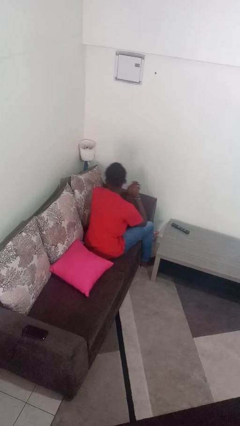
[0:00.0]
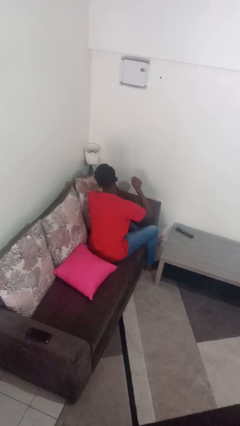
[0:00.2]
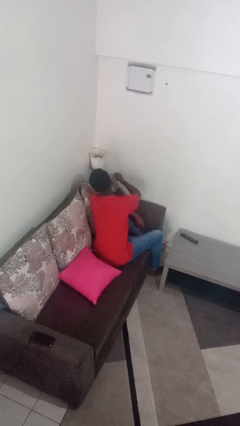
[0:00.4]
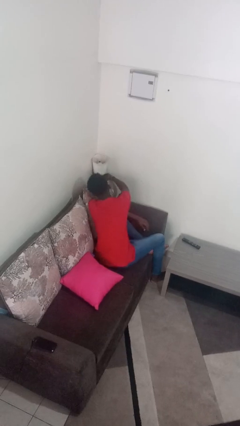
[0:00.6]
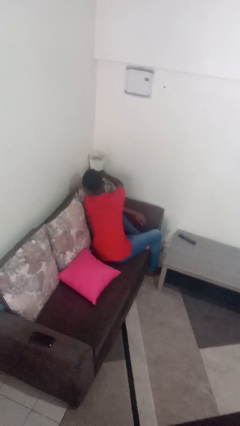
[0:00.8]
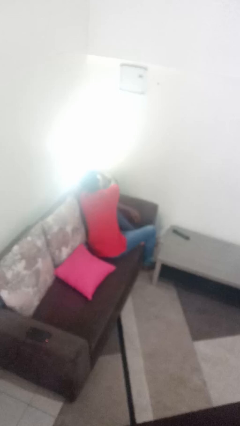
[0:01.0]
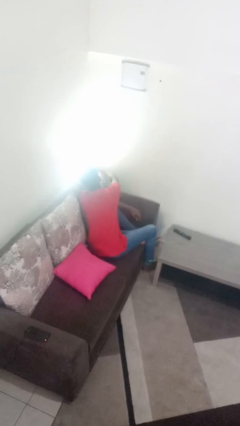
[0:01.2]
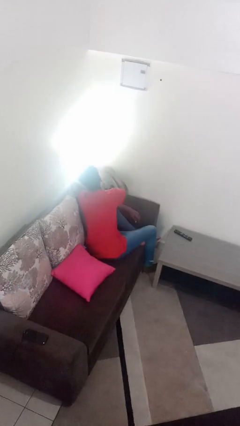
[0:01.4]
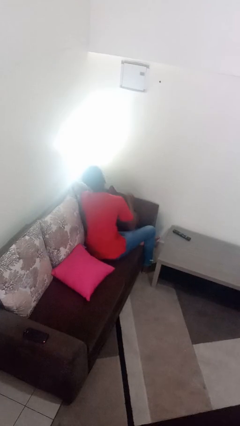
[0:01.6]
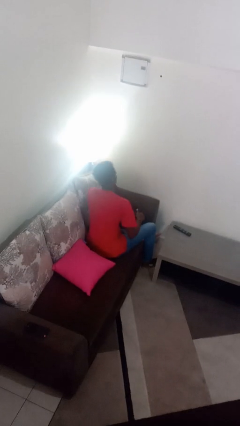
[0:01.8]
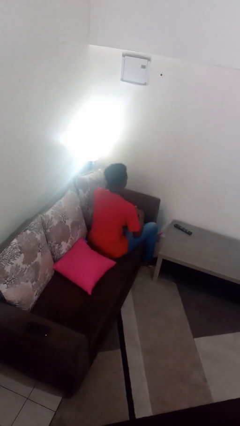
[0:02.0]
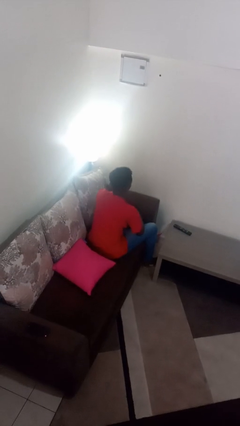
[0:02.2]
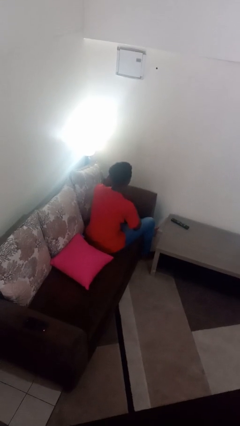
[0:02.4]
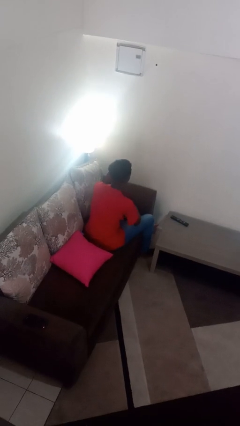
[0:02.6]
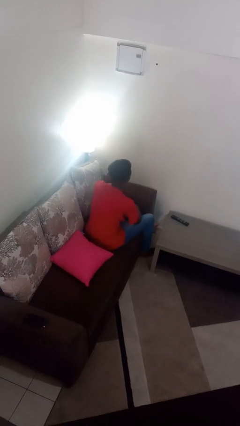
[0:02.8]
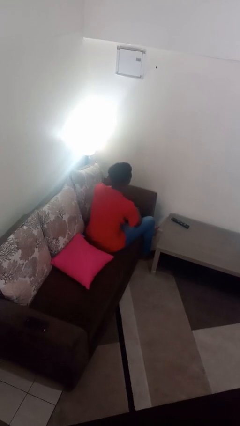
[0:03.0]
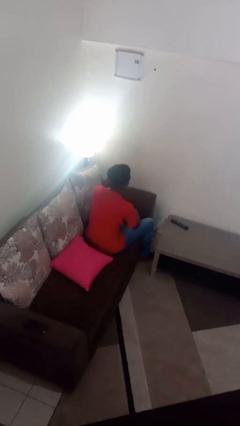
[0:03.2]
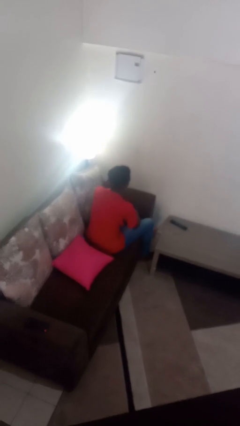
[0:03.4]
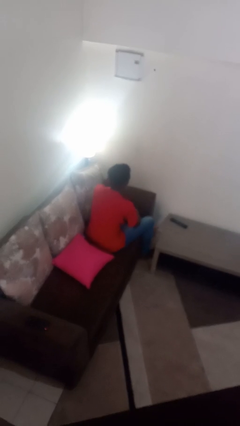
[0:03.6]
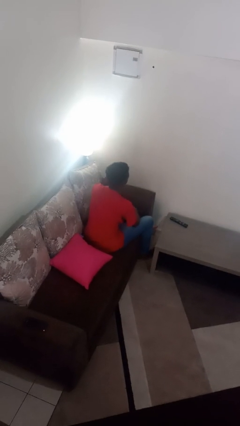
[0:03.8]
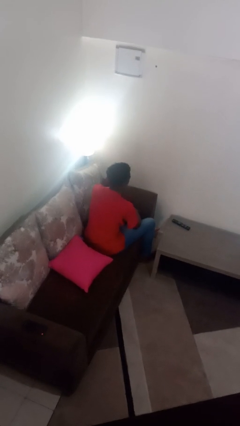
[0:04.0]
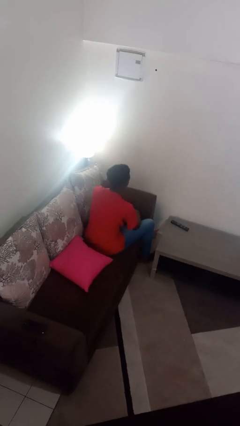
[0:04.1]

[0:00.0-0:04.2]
person turns on lamp

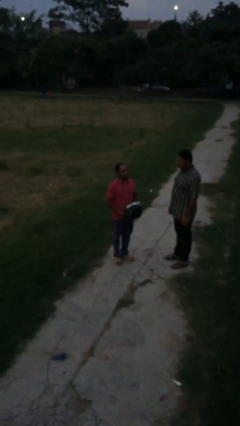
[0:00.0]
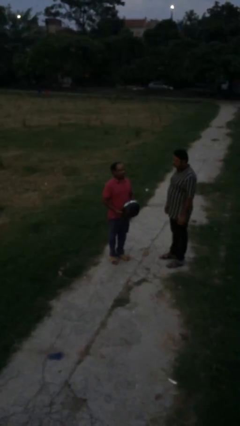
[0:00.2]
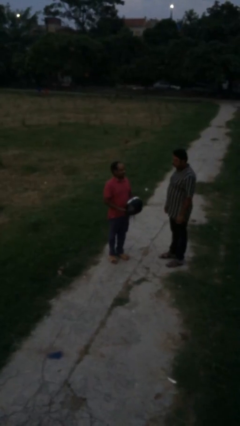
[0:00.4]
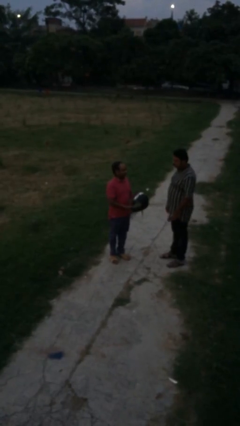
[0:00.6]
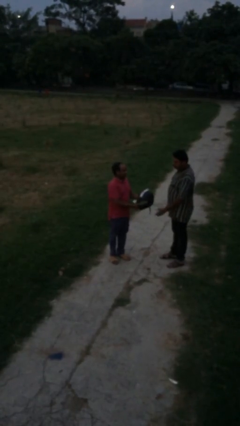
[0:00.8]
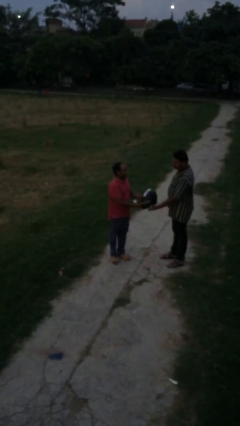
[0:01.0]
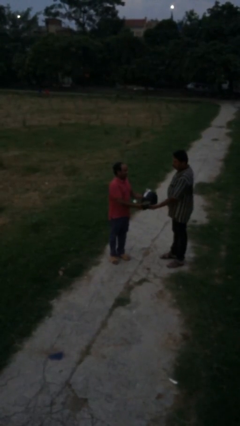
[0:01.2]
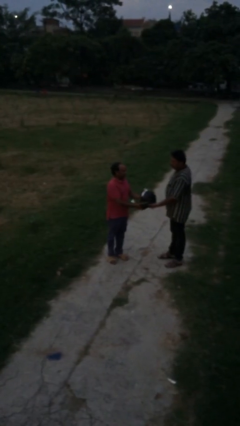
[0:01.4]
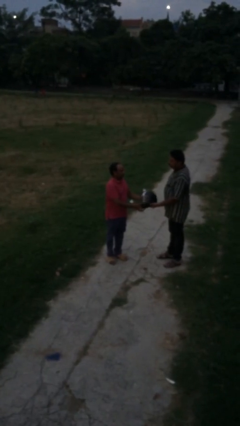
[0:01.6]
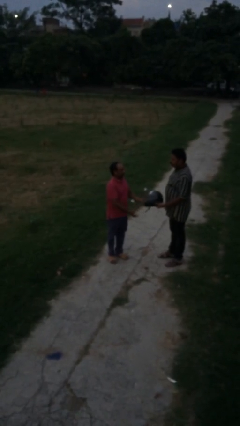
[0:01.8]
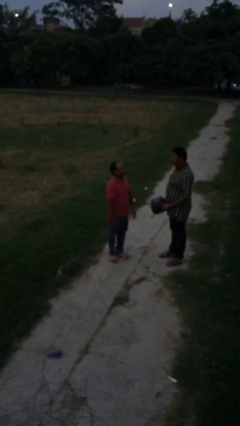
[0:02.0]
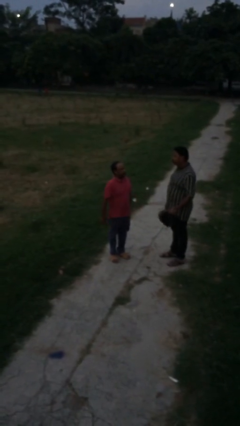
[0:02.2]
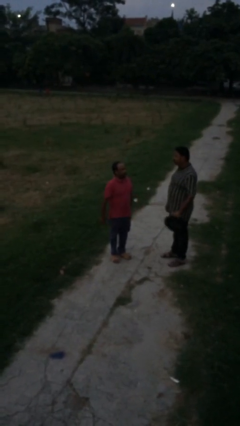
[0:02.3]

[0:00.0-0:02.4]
person transfers object to person

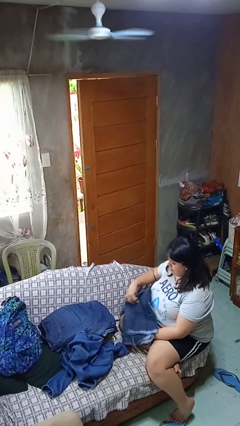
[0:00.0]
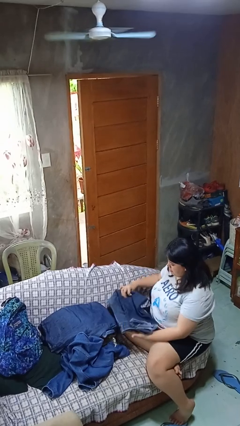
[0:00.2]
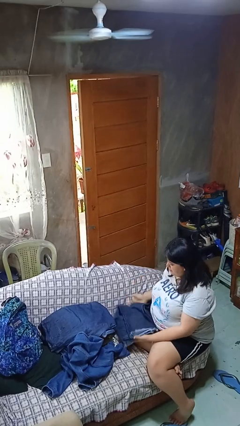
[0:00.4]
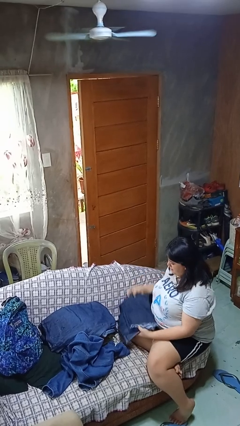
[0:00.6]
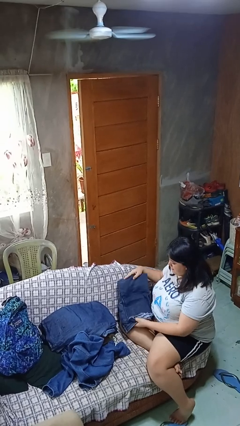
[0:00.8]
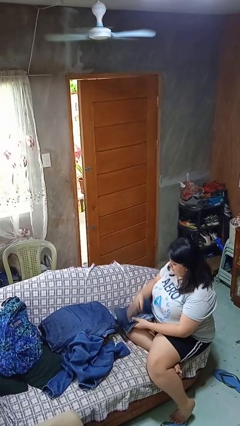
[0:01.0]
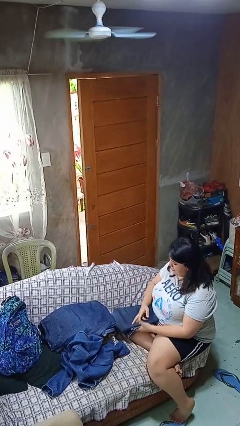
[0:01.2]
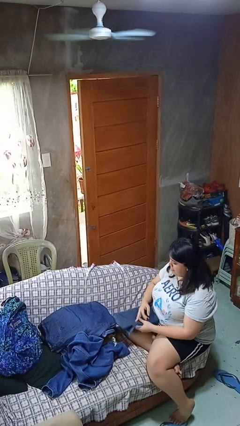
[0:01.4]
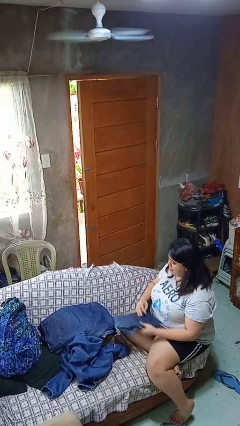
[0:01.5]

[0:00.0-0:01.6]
person folds pants

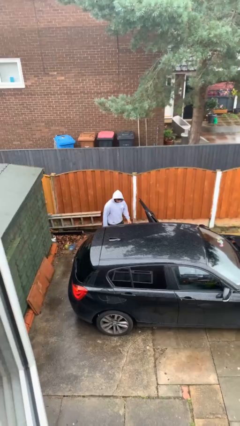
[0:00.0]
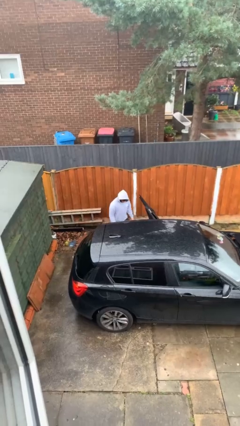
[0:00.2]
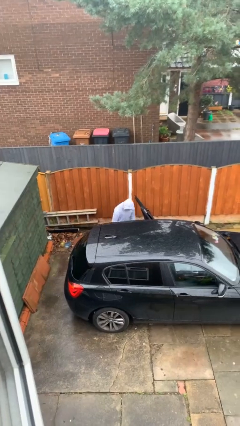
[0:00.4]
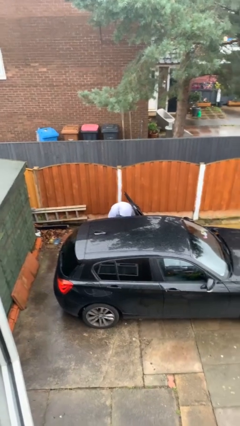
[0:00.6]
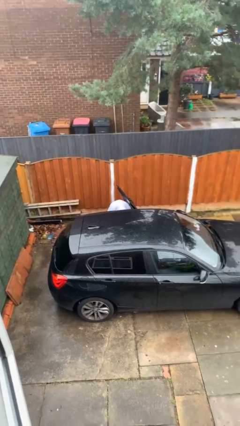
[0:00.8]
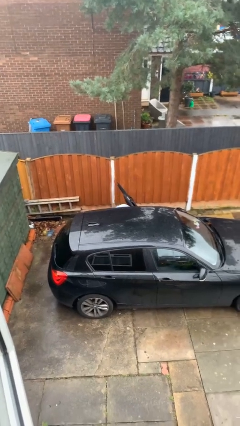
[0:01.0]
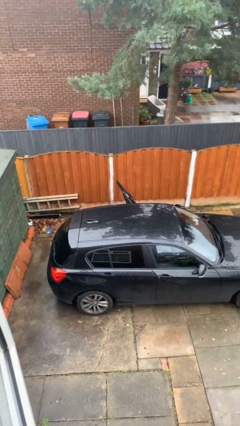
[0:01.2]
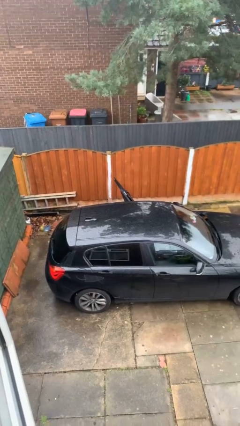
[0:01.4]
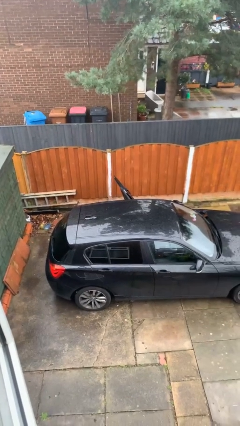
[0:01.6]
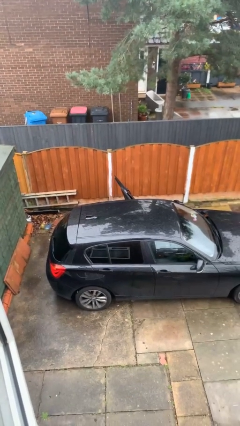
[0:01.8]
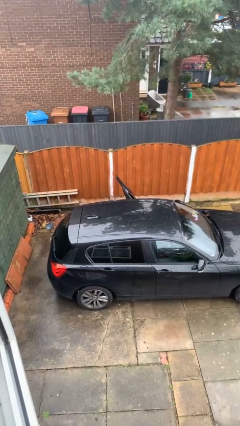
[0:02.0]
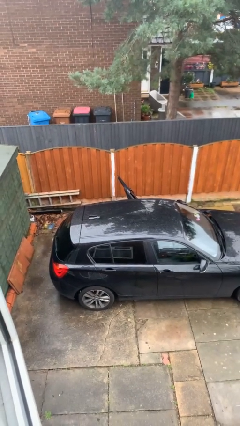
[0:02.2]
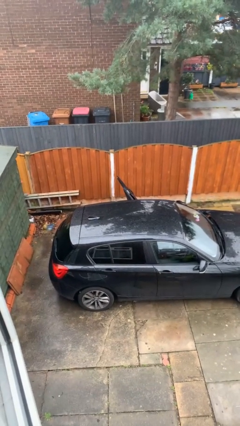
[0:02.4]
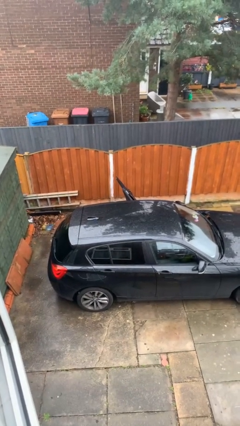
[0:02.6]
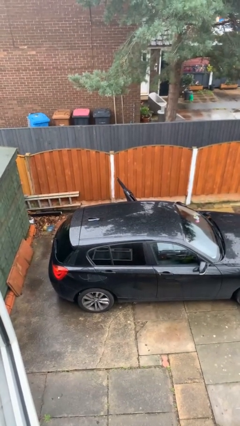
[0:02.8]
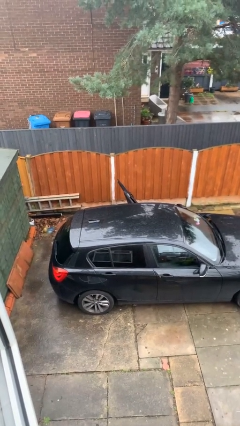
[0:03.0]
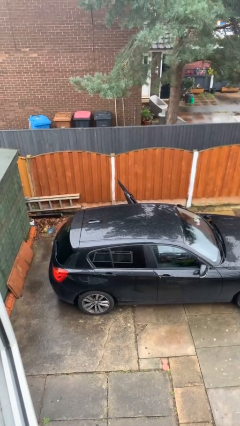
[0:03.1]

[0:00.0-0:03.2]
person enters car

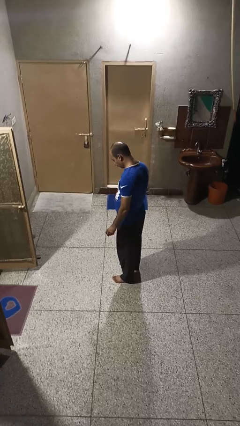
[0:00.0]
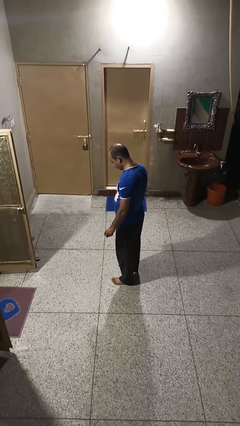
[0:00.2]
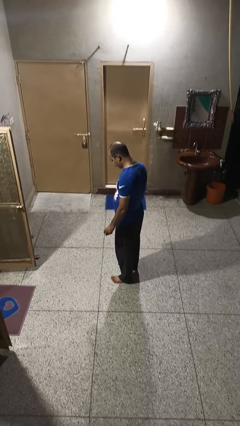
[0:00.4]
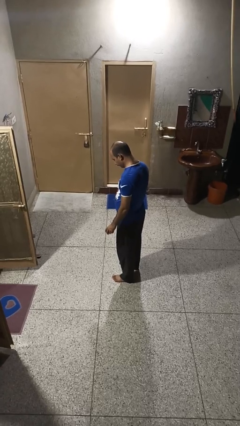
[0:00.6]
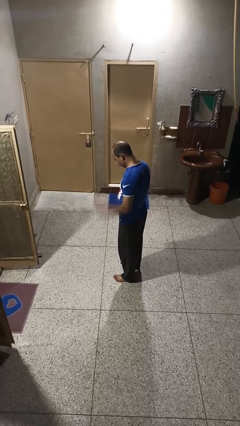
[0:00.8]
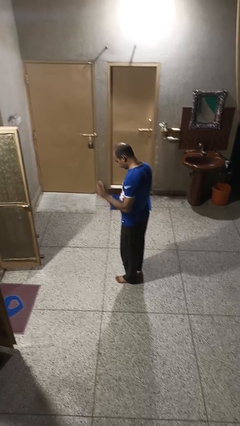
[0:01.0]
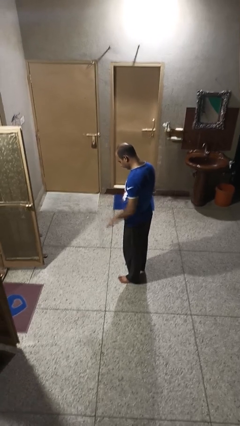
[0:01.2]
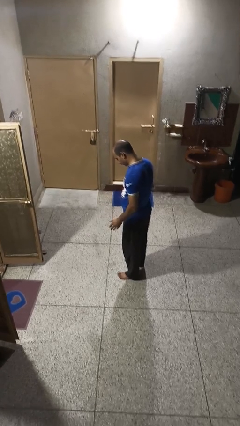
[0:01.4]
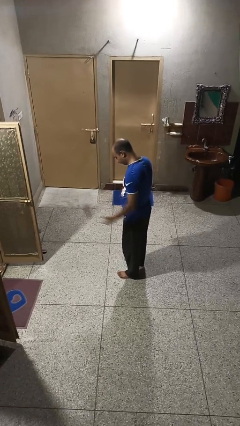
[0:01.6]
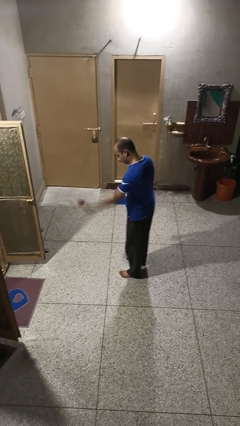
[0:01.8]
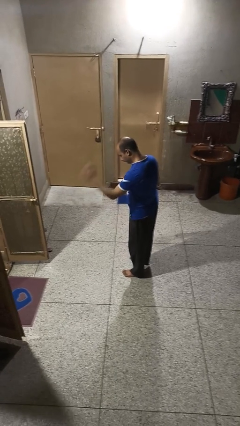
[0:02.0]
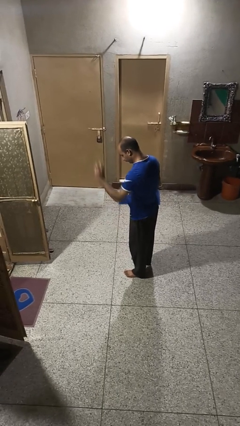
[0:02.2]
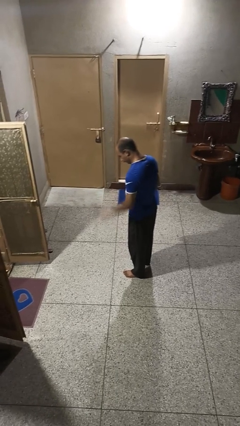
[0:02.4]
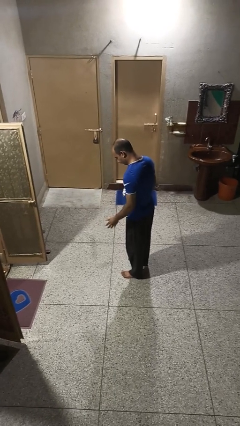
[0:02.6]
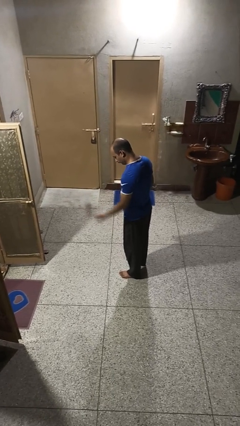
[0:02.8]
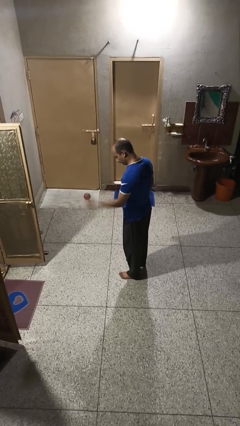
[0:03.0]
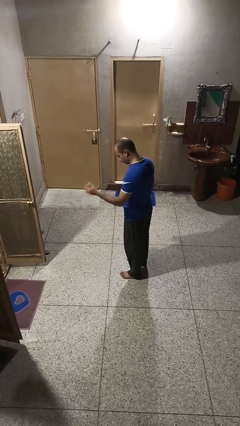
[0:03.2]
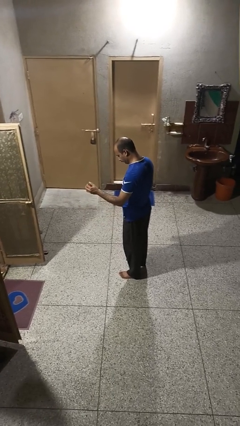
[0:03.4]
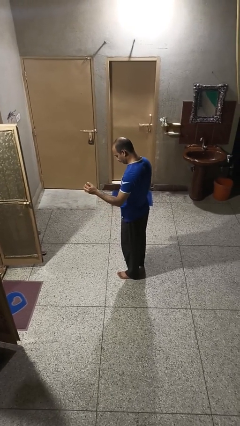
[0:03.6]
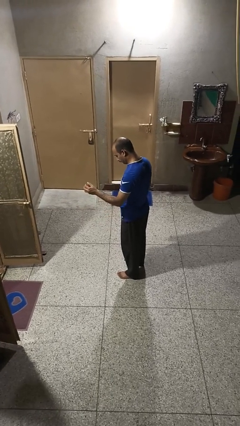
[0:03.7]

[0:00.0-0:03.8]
person bounces ball on floor

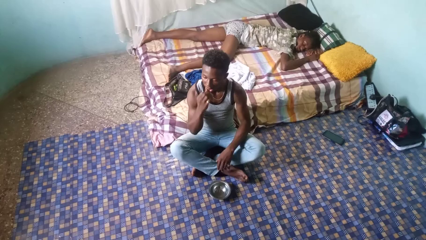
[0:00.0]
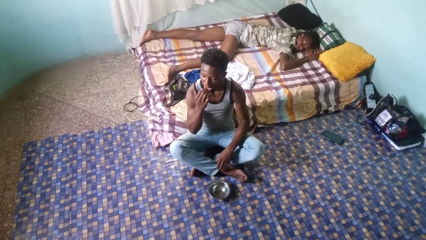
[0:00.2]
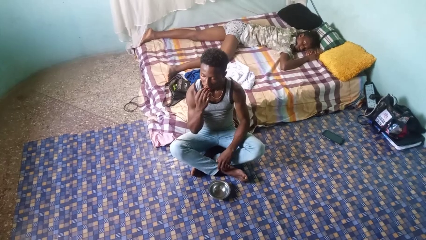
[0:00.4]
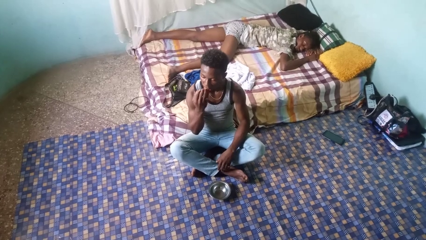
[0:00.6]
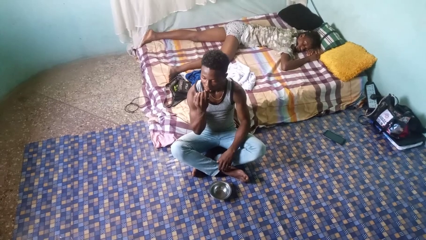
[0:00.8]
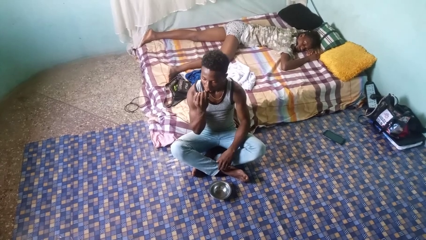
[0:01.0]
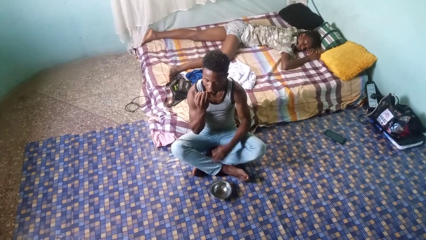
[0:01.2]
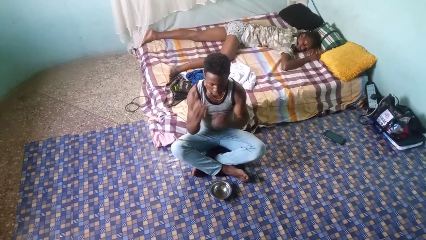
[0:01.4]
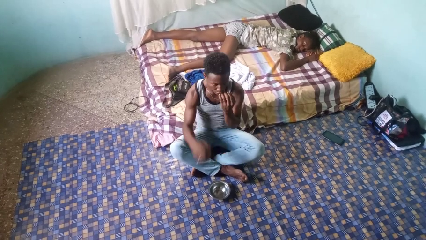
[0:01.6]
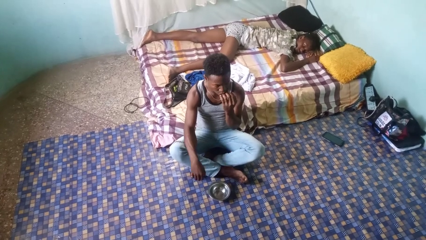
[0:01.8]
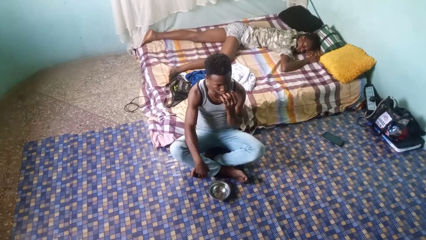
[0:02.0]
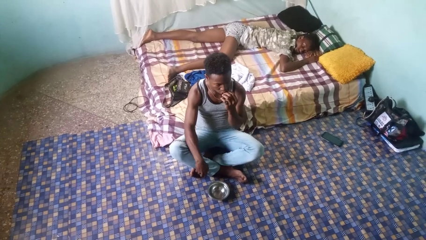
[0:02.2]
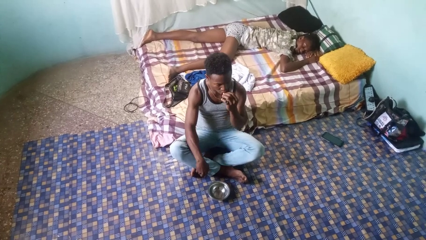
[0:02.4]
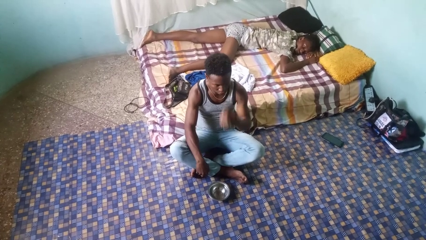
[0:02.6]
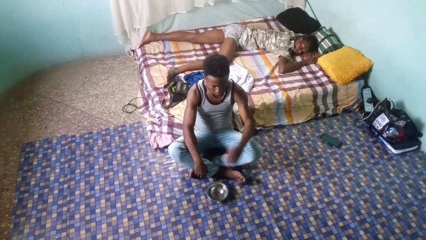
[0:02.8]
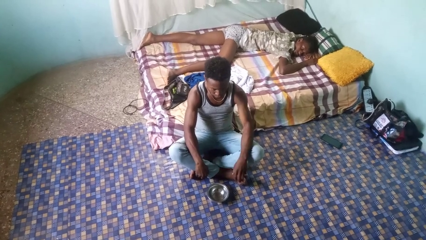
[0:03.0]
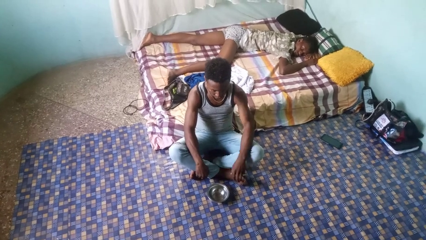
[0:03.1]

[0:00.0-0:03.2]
person licks fingers
